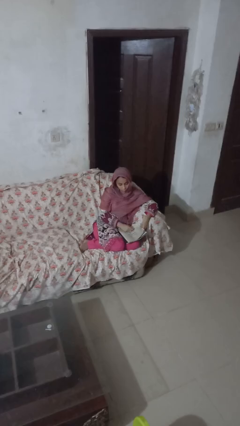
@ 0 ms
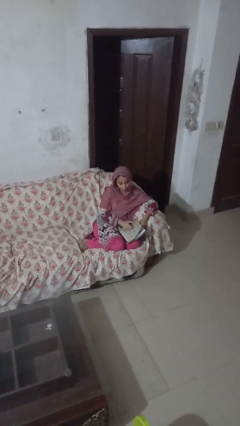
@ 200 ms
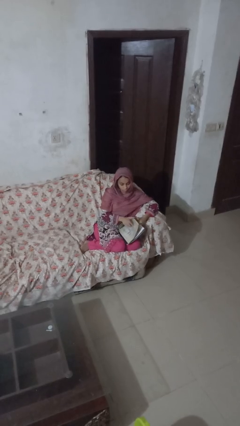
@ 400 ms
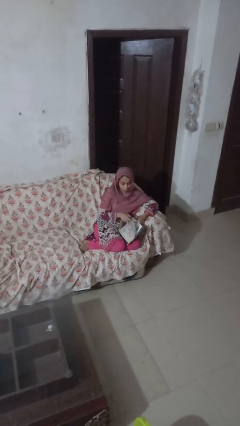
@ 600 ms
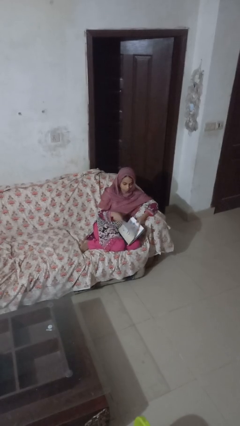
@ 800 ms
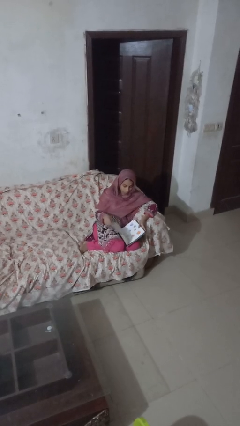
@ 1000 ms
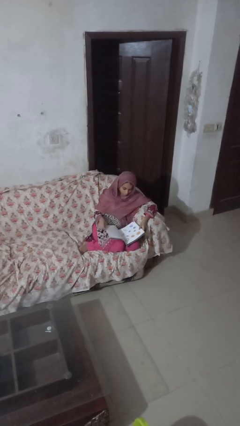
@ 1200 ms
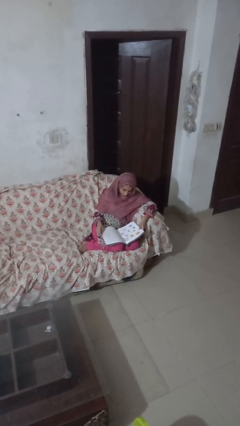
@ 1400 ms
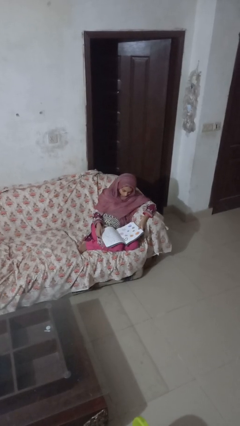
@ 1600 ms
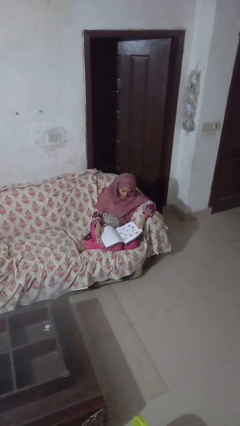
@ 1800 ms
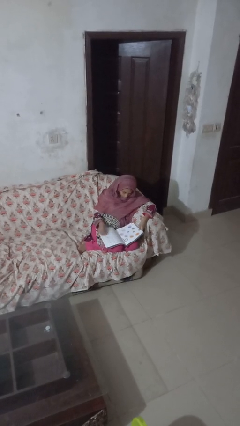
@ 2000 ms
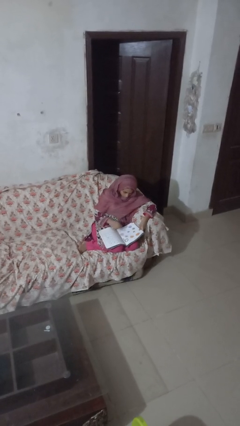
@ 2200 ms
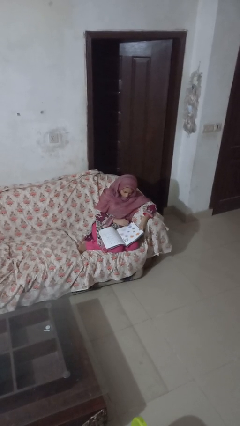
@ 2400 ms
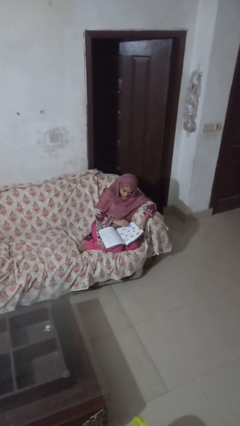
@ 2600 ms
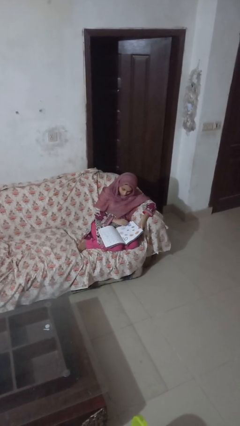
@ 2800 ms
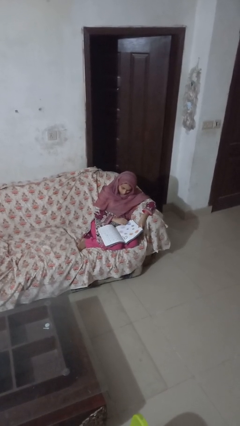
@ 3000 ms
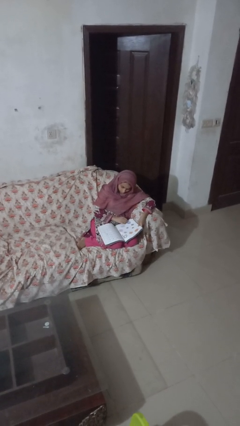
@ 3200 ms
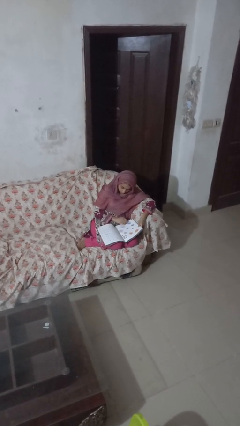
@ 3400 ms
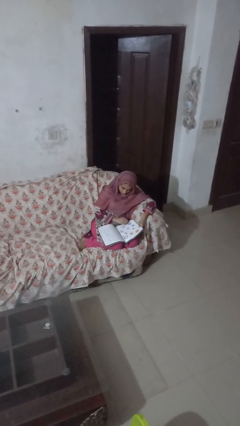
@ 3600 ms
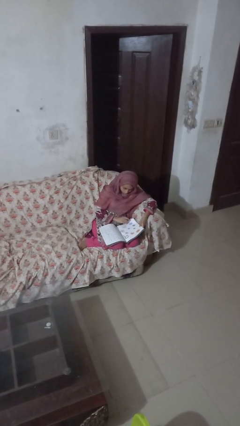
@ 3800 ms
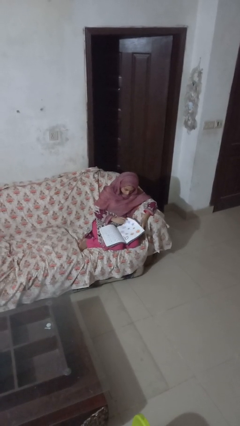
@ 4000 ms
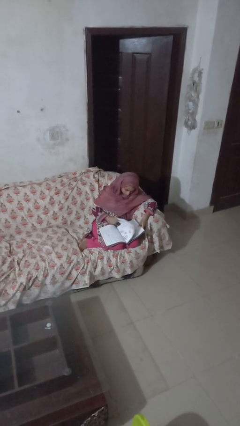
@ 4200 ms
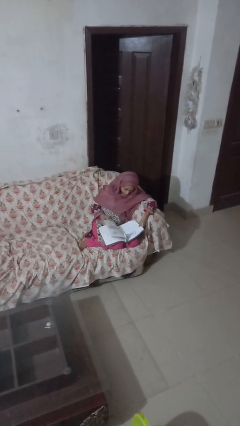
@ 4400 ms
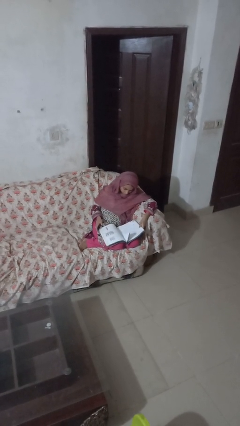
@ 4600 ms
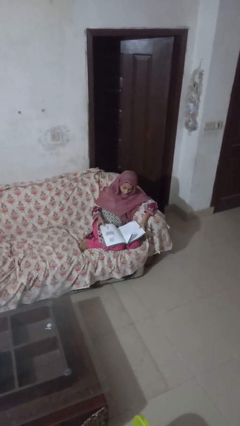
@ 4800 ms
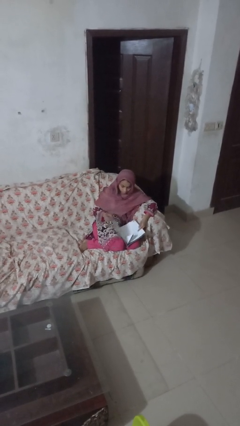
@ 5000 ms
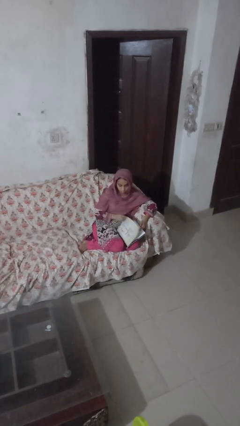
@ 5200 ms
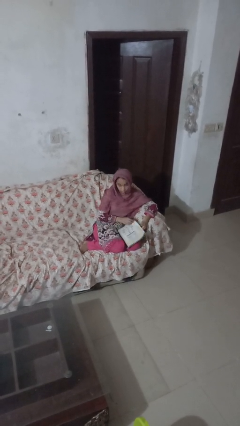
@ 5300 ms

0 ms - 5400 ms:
person reads book

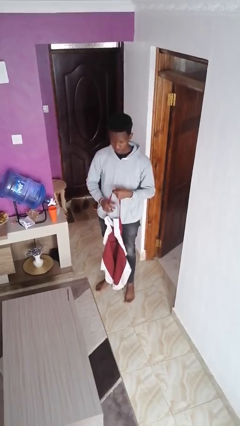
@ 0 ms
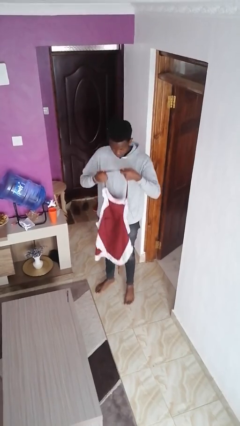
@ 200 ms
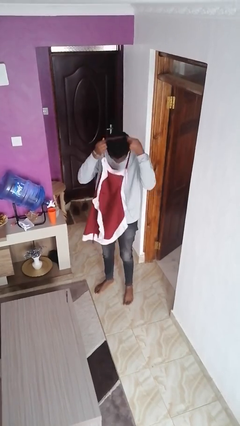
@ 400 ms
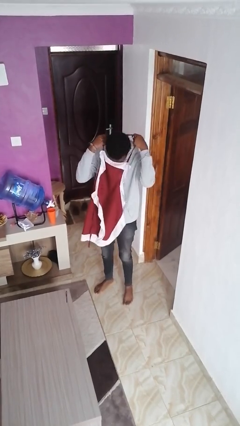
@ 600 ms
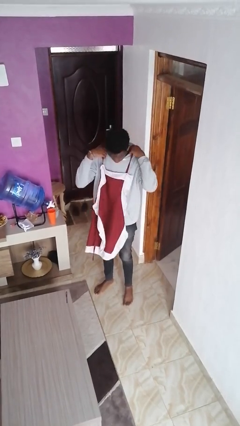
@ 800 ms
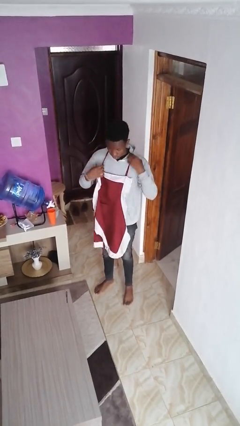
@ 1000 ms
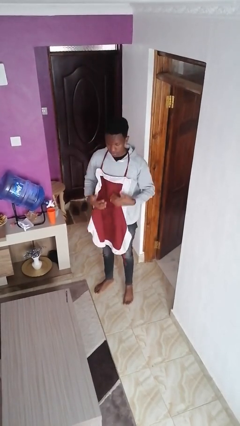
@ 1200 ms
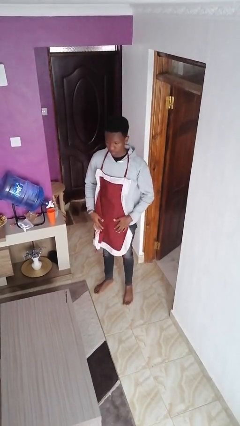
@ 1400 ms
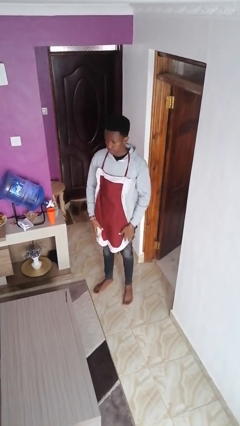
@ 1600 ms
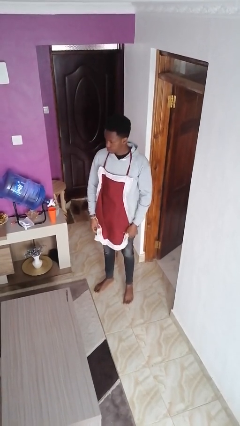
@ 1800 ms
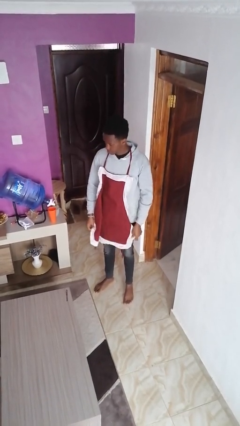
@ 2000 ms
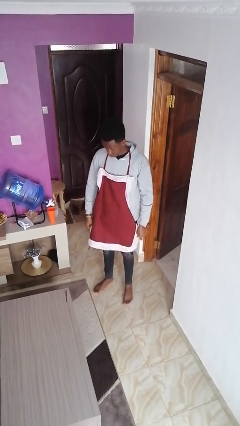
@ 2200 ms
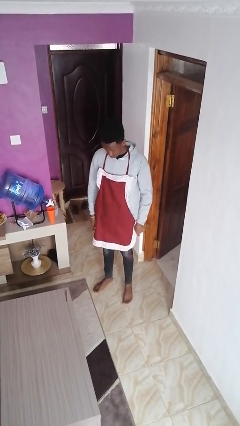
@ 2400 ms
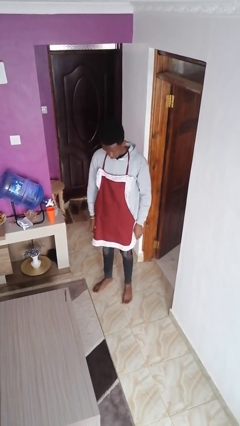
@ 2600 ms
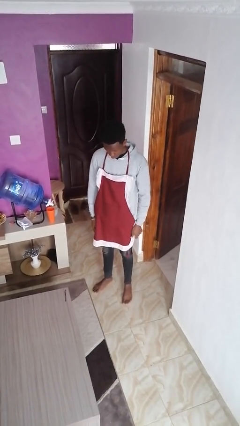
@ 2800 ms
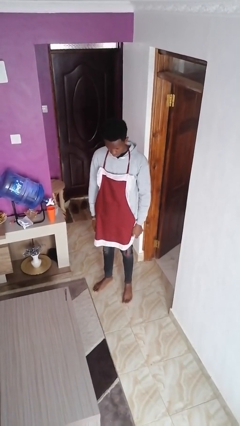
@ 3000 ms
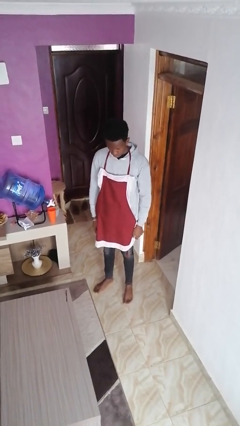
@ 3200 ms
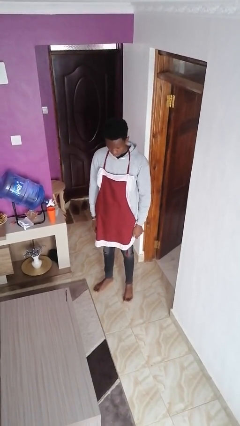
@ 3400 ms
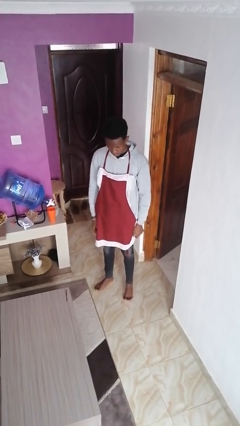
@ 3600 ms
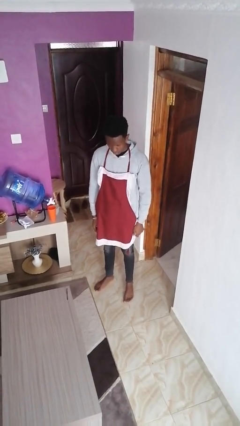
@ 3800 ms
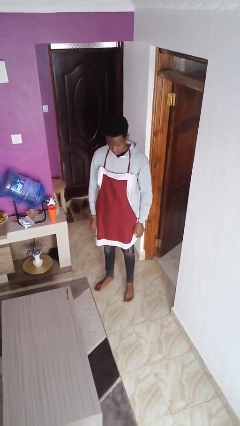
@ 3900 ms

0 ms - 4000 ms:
person puts on apron

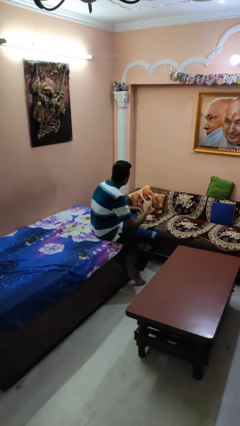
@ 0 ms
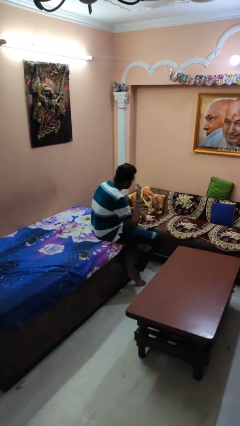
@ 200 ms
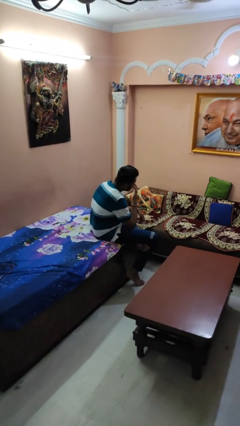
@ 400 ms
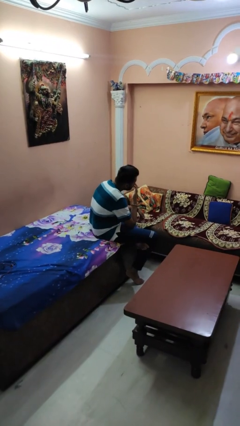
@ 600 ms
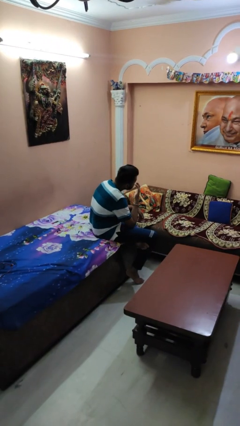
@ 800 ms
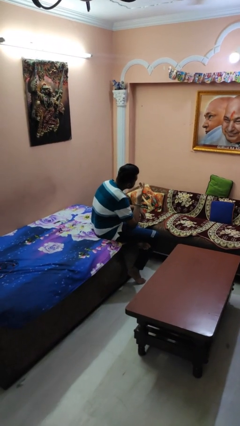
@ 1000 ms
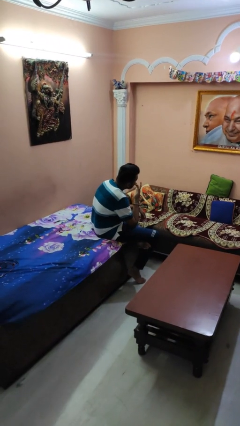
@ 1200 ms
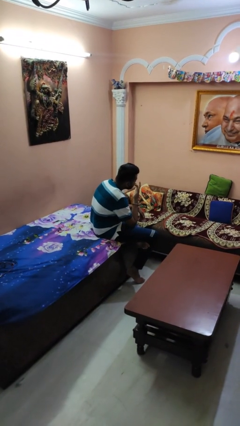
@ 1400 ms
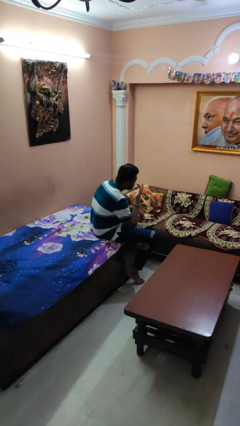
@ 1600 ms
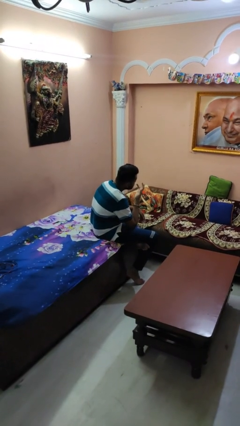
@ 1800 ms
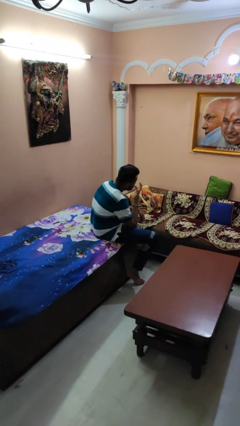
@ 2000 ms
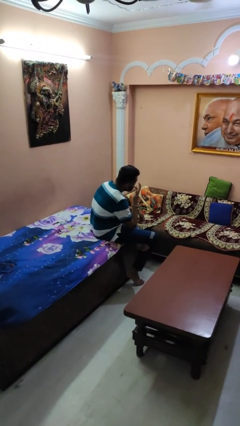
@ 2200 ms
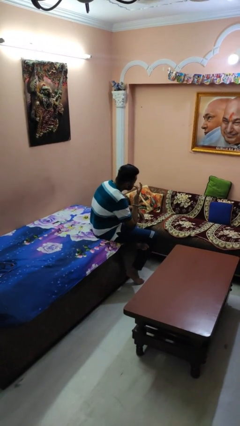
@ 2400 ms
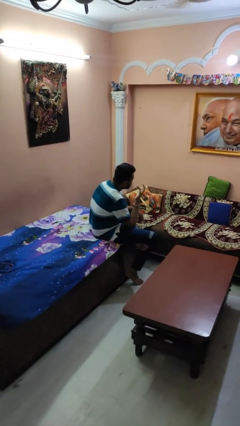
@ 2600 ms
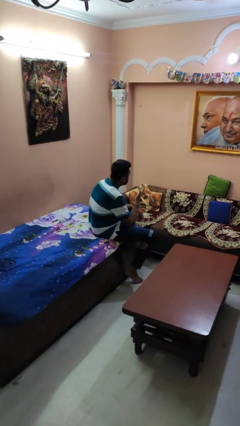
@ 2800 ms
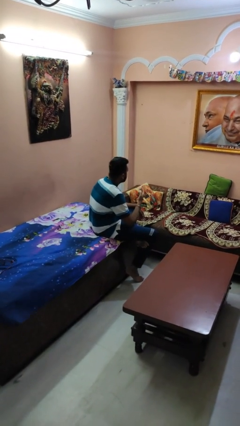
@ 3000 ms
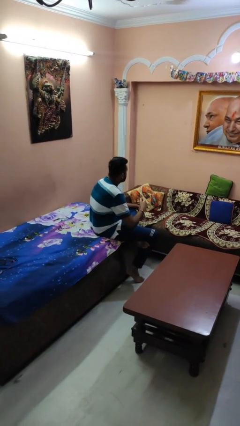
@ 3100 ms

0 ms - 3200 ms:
person licks fingers

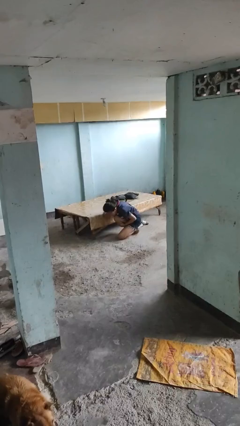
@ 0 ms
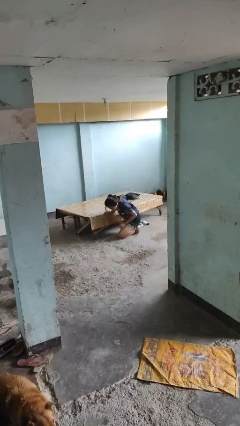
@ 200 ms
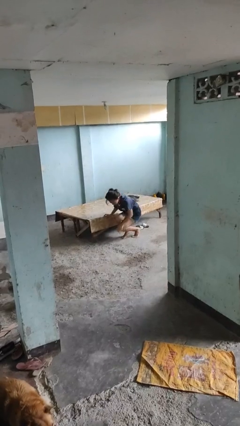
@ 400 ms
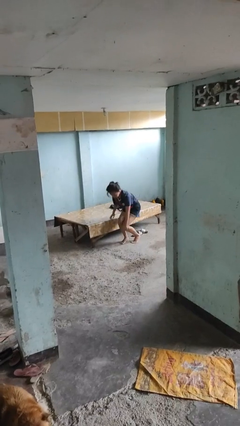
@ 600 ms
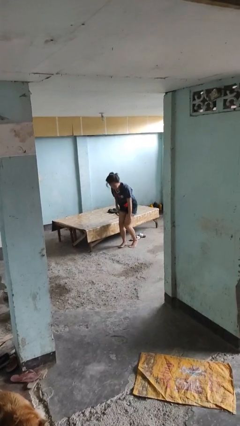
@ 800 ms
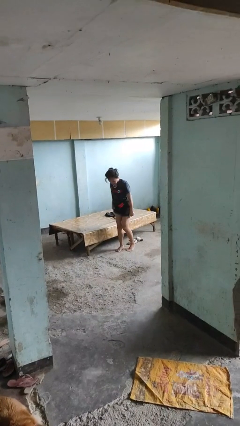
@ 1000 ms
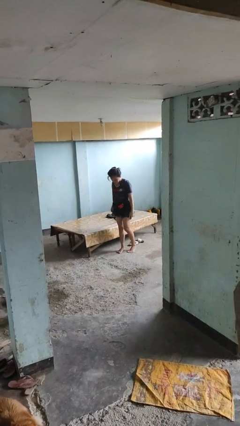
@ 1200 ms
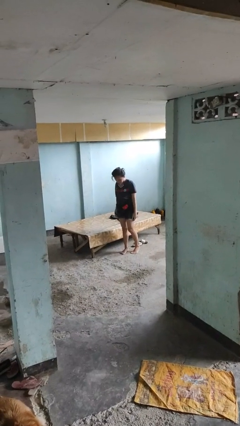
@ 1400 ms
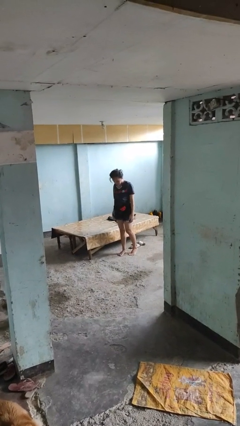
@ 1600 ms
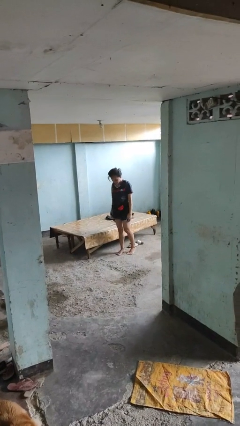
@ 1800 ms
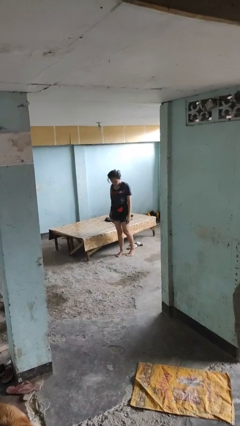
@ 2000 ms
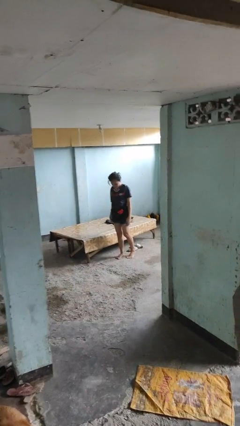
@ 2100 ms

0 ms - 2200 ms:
person stands up from floor

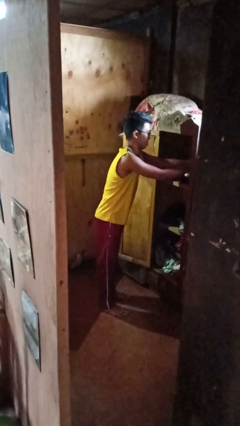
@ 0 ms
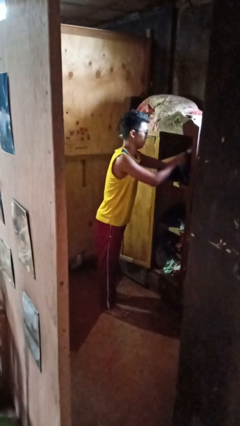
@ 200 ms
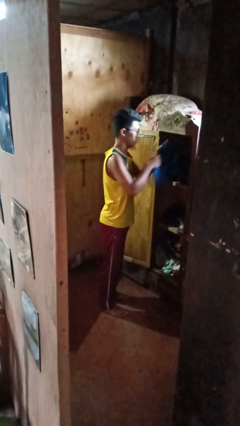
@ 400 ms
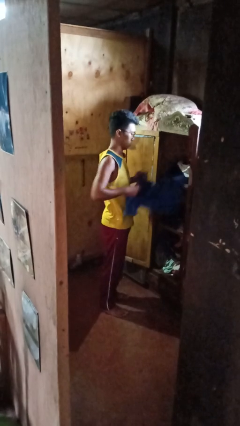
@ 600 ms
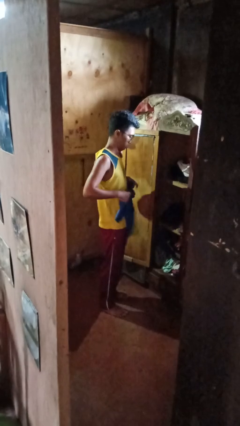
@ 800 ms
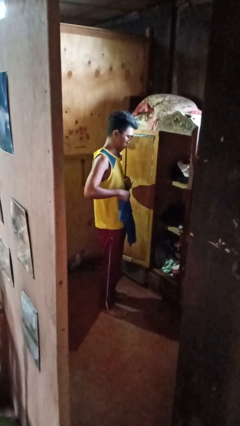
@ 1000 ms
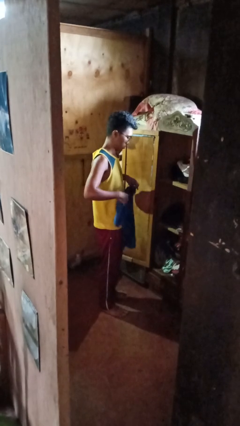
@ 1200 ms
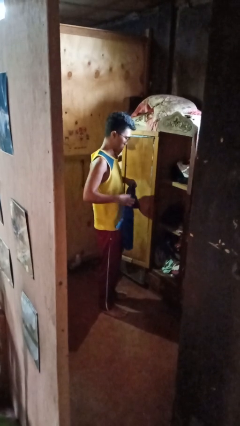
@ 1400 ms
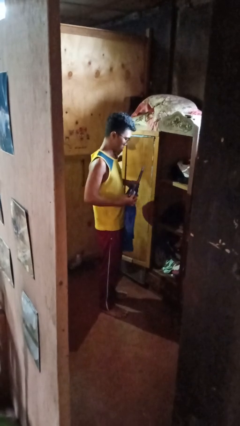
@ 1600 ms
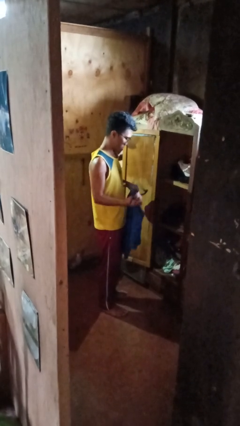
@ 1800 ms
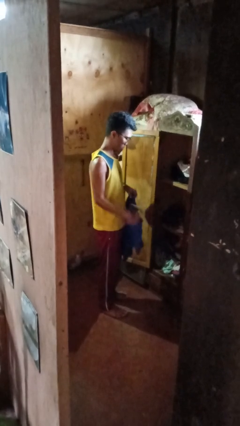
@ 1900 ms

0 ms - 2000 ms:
person takes clothes from closet

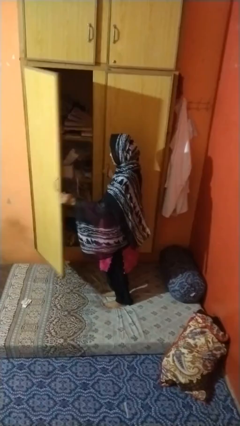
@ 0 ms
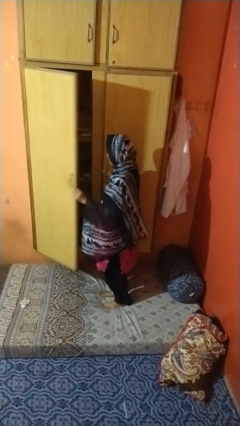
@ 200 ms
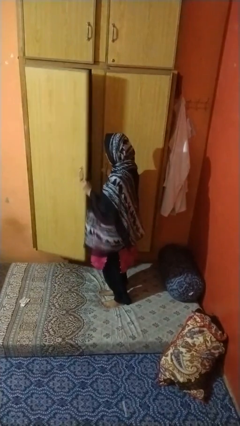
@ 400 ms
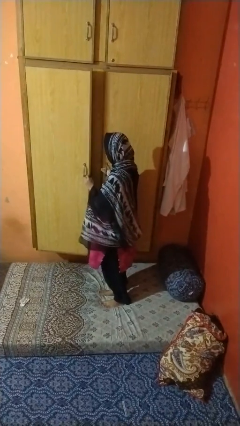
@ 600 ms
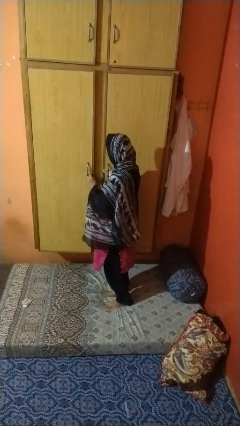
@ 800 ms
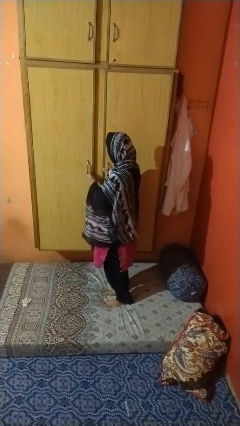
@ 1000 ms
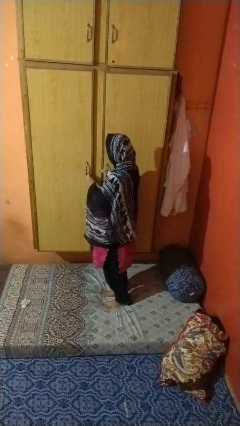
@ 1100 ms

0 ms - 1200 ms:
person closes closet door
